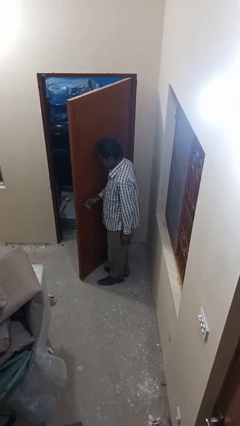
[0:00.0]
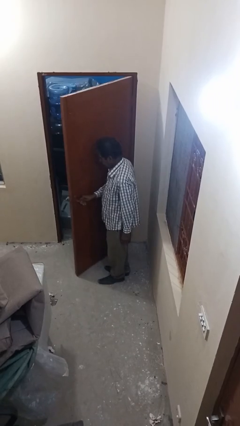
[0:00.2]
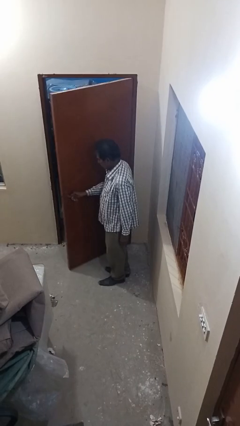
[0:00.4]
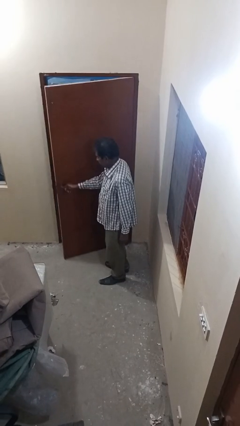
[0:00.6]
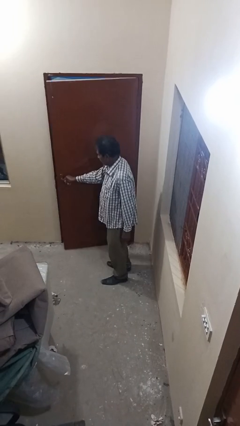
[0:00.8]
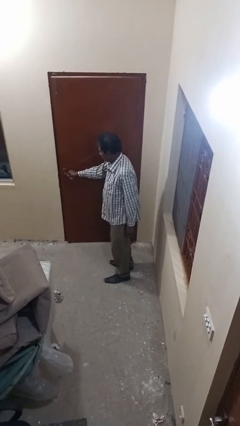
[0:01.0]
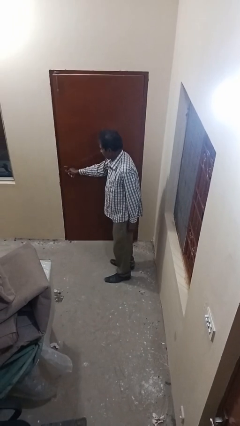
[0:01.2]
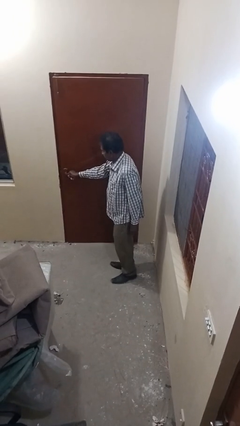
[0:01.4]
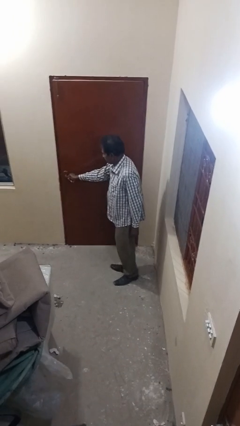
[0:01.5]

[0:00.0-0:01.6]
person closes facility door

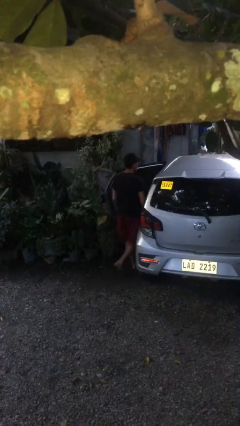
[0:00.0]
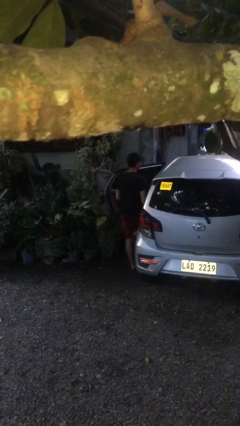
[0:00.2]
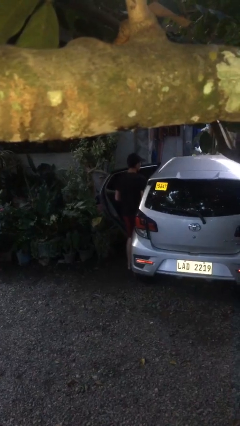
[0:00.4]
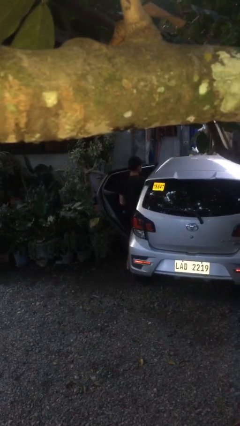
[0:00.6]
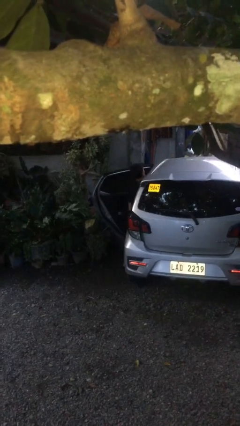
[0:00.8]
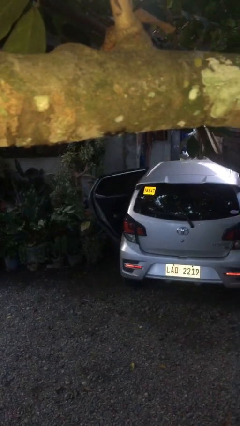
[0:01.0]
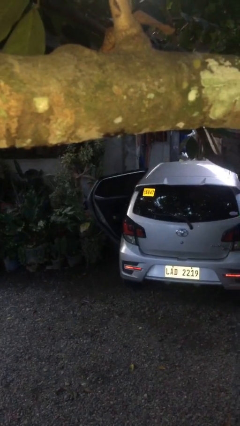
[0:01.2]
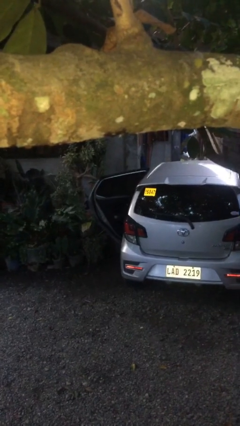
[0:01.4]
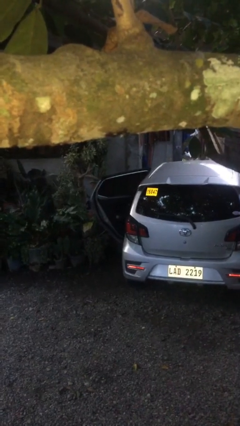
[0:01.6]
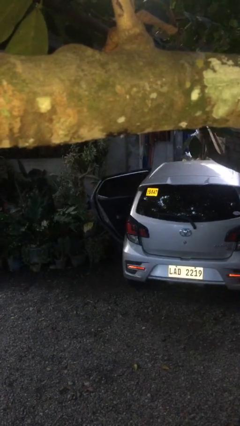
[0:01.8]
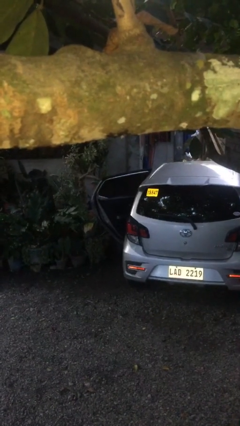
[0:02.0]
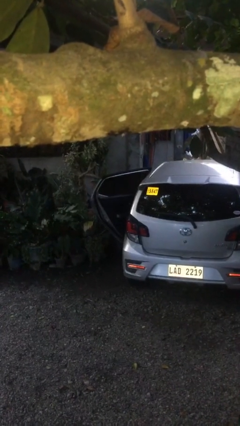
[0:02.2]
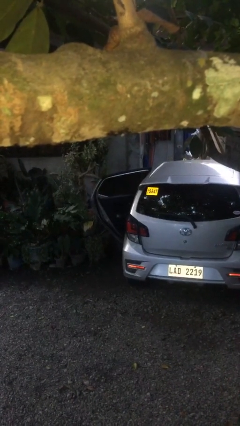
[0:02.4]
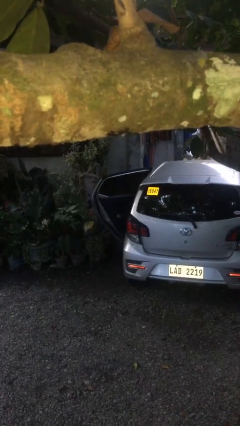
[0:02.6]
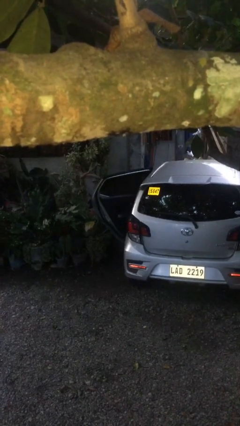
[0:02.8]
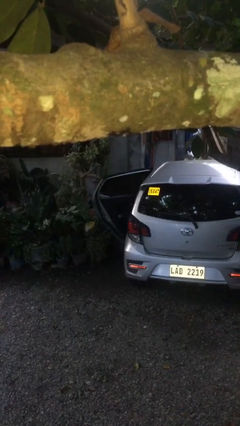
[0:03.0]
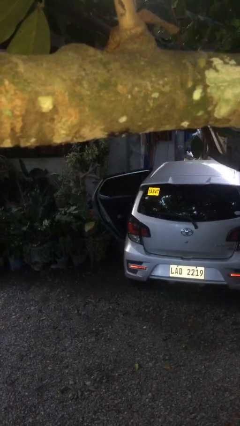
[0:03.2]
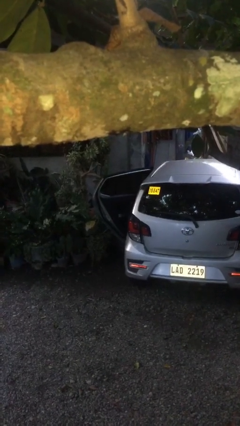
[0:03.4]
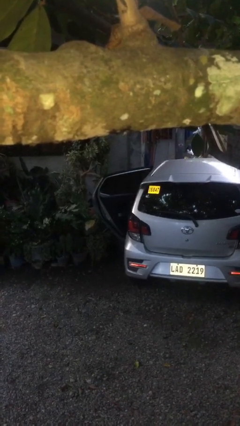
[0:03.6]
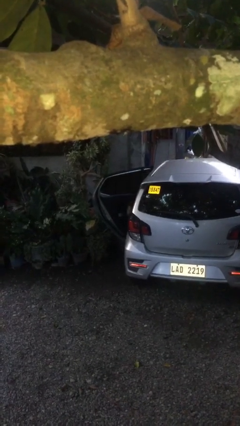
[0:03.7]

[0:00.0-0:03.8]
person enters car

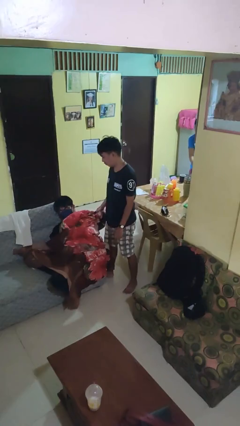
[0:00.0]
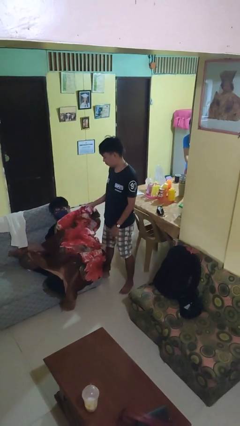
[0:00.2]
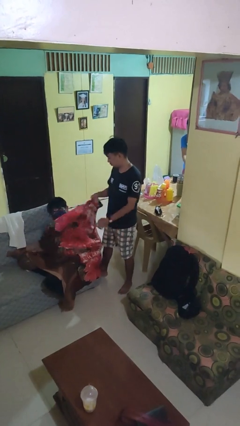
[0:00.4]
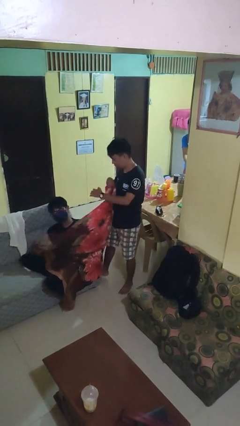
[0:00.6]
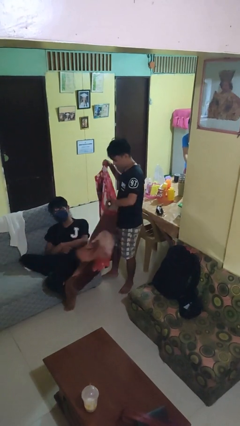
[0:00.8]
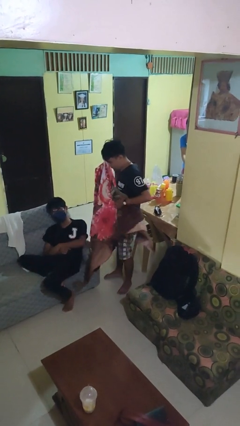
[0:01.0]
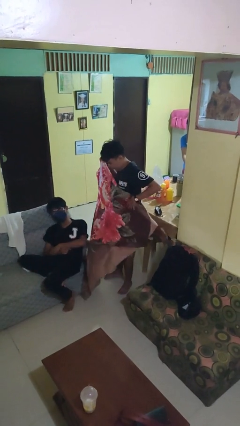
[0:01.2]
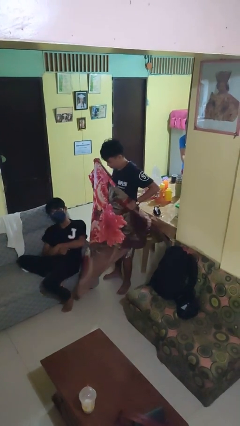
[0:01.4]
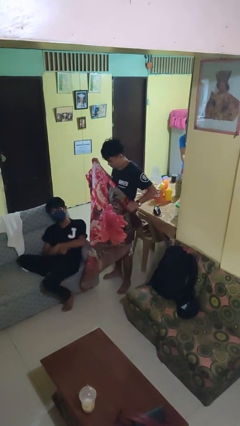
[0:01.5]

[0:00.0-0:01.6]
person uncovers friend with blanket

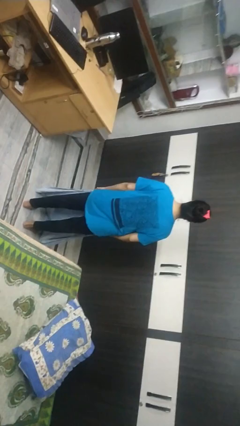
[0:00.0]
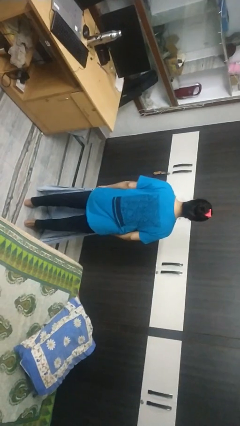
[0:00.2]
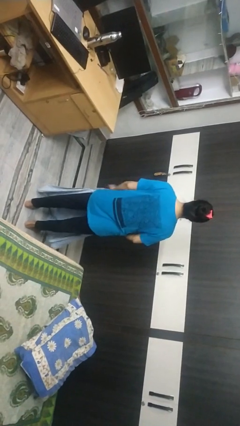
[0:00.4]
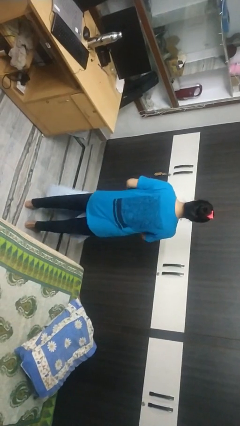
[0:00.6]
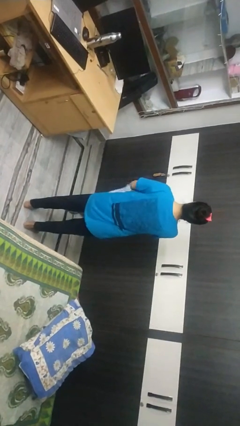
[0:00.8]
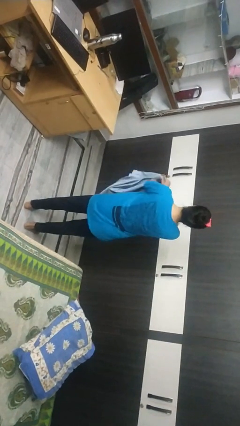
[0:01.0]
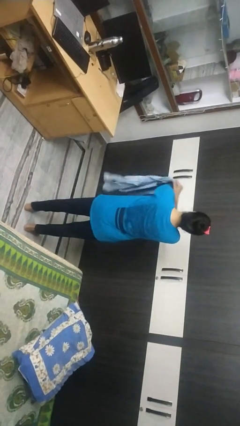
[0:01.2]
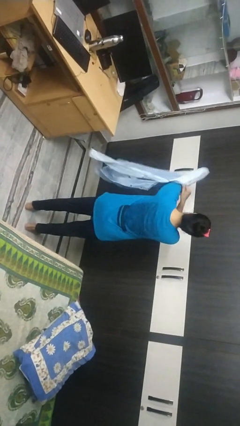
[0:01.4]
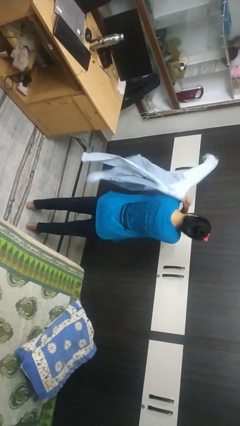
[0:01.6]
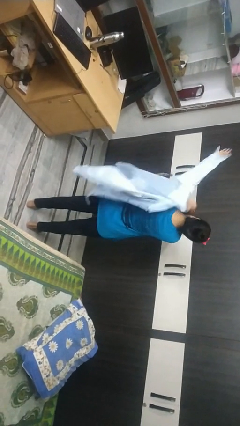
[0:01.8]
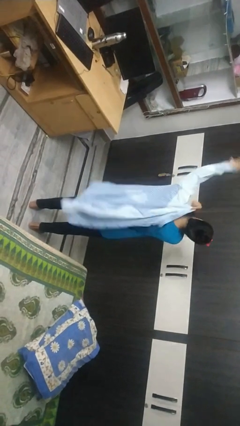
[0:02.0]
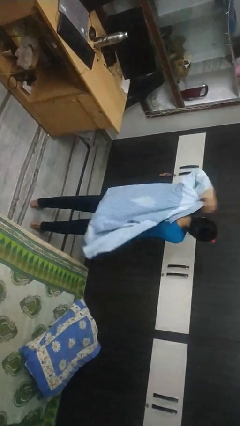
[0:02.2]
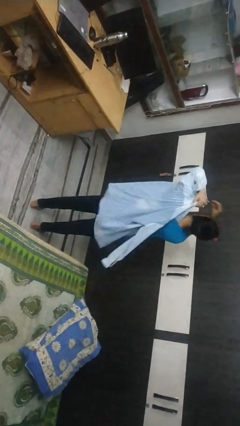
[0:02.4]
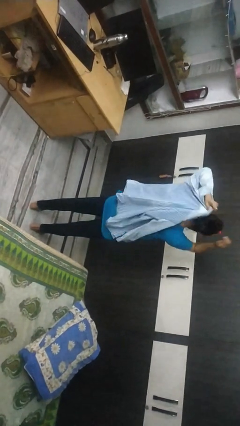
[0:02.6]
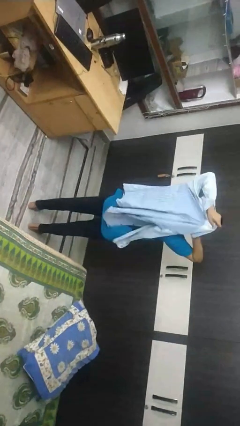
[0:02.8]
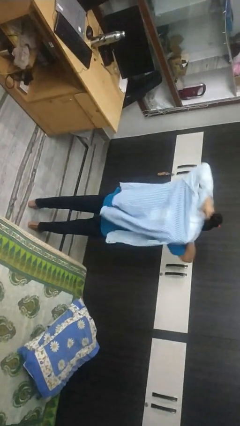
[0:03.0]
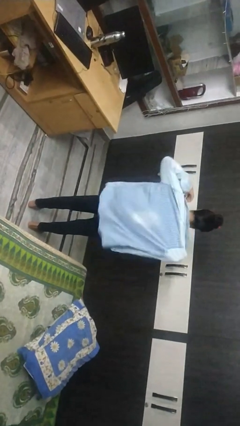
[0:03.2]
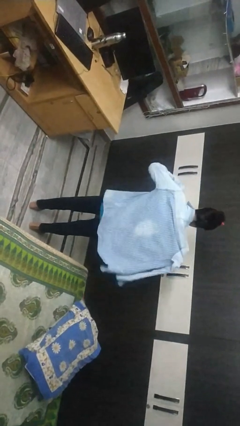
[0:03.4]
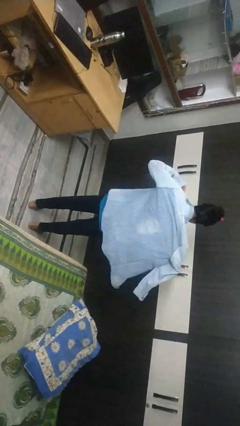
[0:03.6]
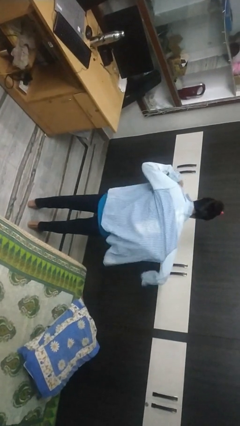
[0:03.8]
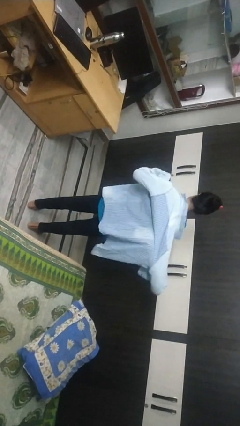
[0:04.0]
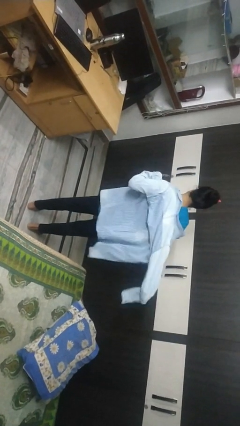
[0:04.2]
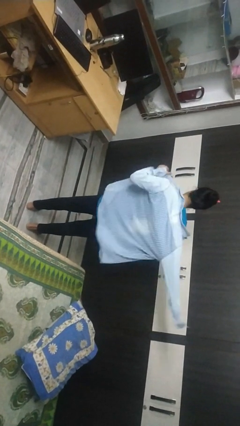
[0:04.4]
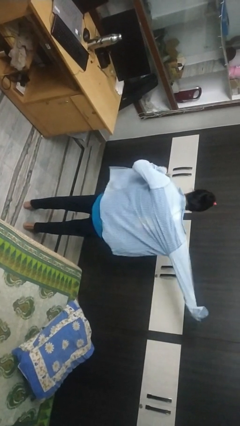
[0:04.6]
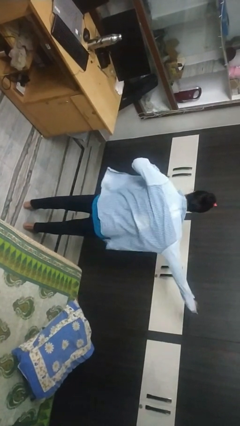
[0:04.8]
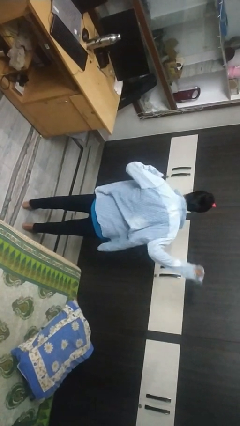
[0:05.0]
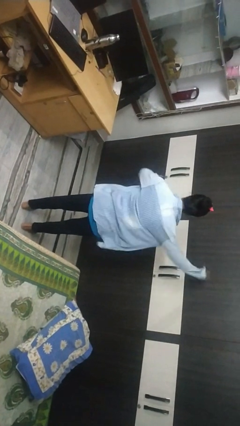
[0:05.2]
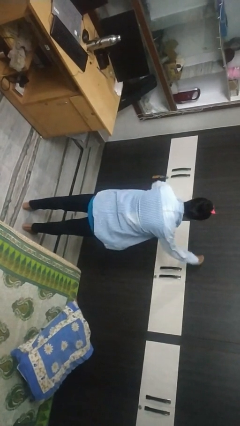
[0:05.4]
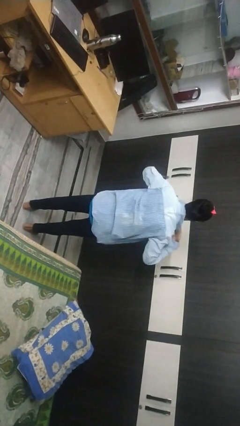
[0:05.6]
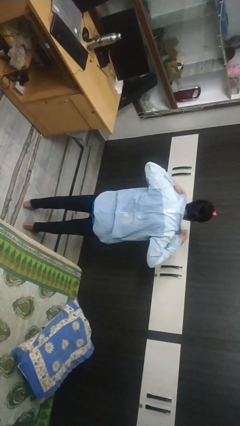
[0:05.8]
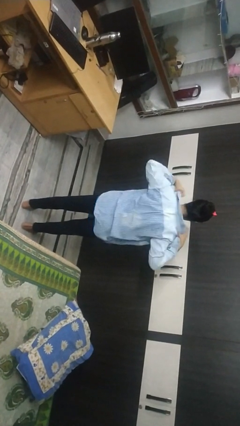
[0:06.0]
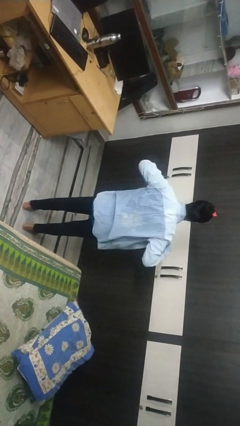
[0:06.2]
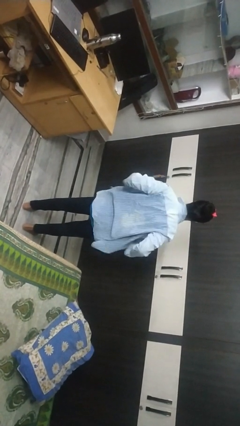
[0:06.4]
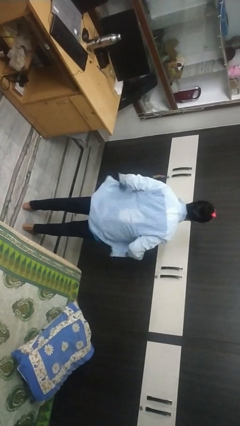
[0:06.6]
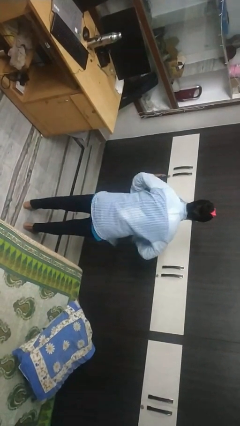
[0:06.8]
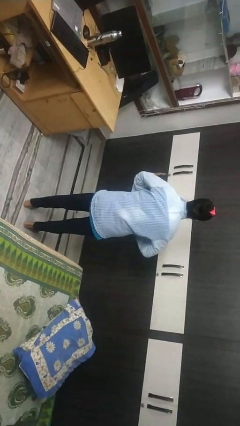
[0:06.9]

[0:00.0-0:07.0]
person puts on shirt

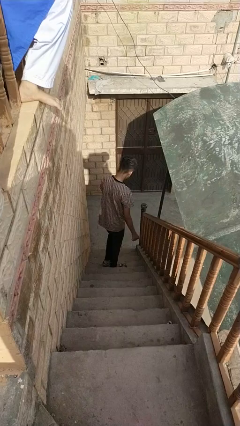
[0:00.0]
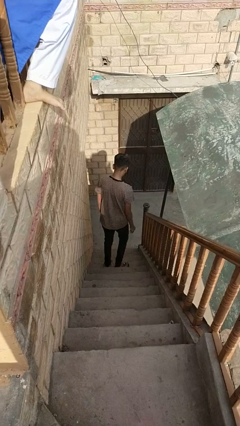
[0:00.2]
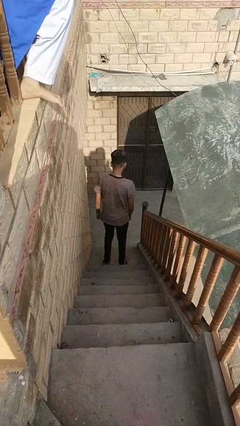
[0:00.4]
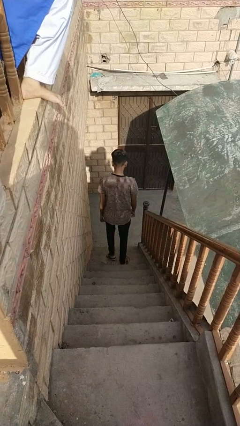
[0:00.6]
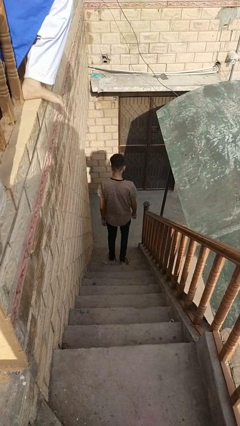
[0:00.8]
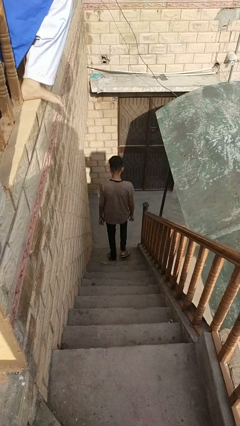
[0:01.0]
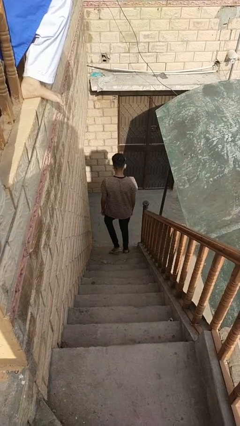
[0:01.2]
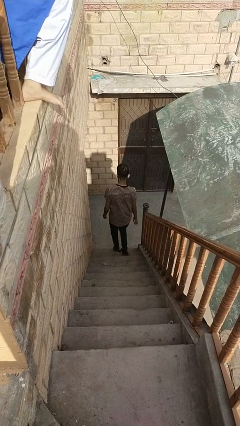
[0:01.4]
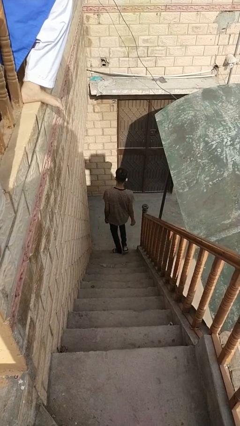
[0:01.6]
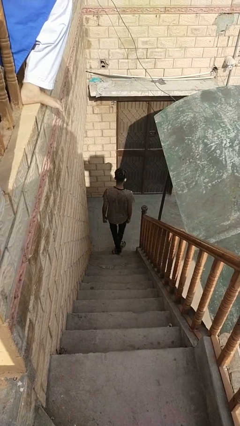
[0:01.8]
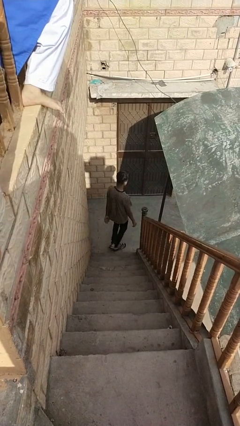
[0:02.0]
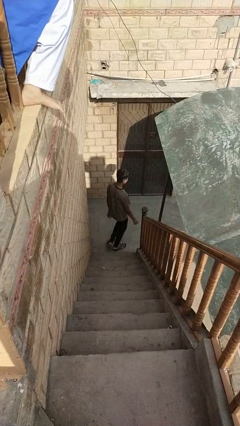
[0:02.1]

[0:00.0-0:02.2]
person climbs down stairs

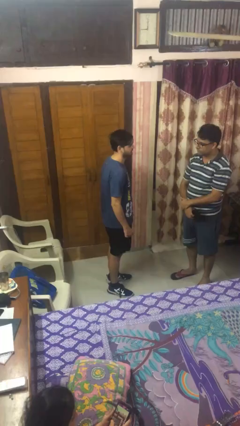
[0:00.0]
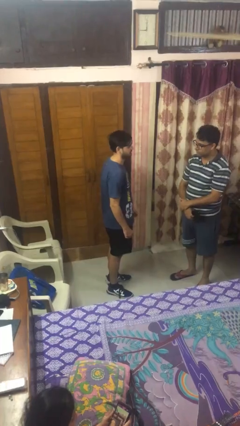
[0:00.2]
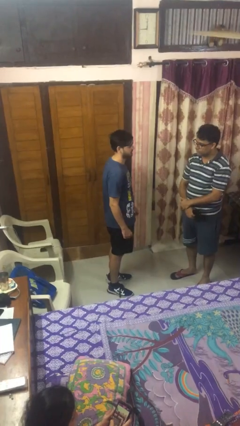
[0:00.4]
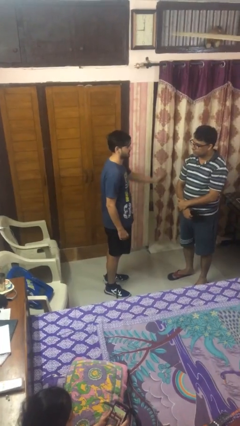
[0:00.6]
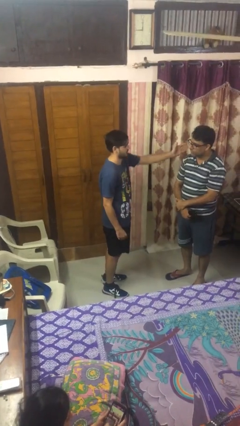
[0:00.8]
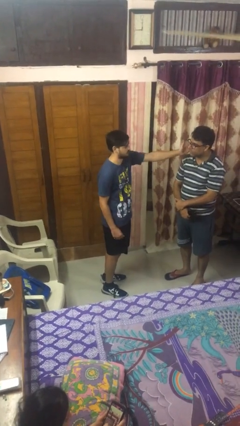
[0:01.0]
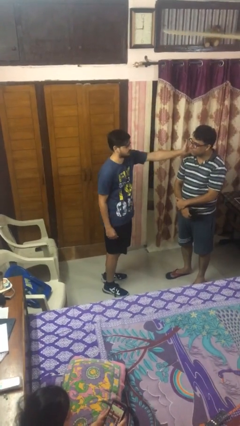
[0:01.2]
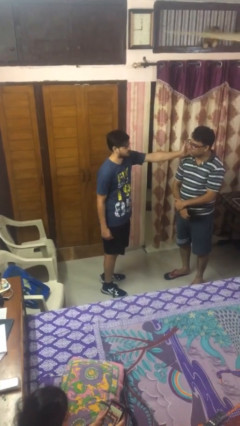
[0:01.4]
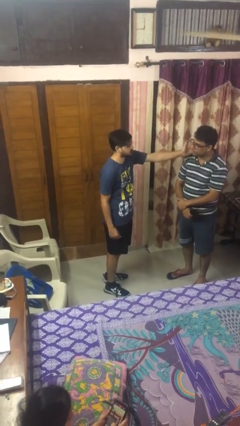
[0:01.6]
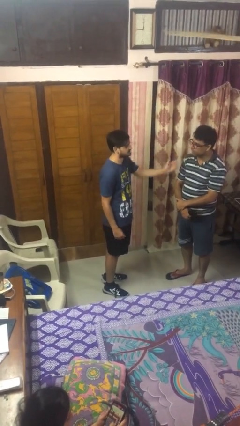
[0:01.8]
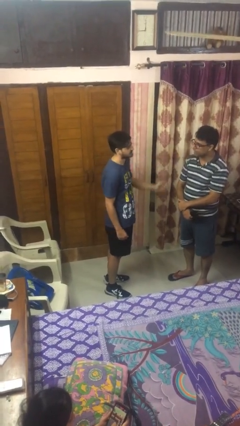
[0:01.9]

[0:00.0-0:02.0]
person touches face of person
